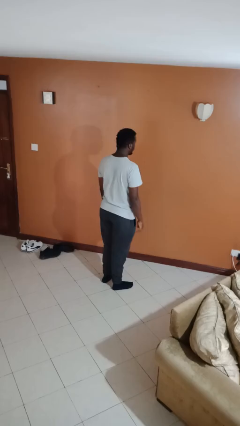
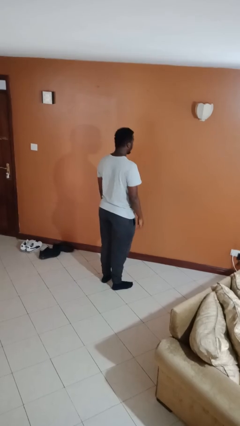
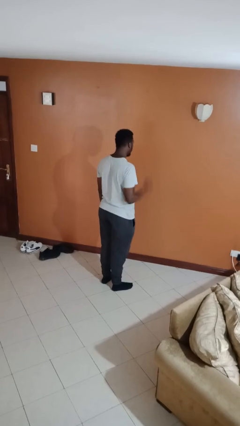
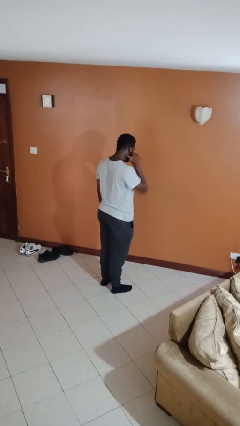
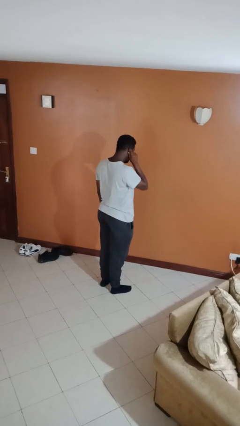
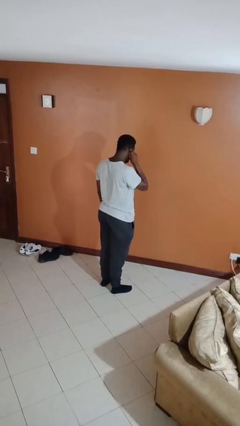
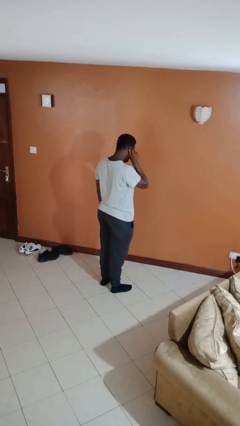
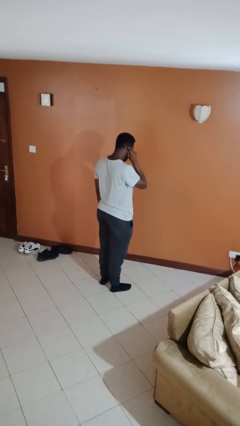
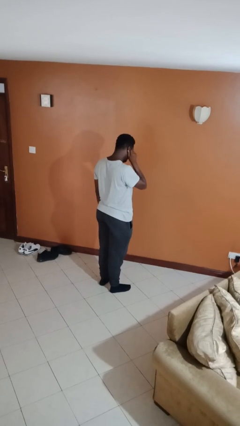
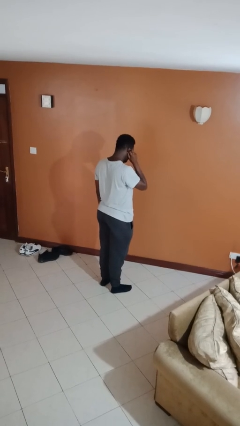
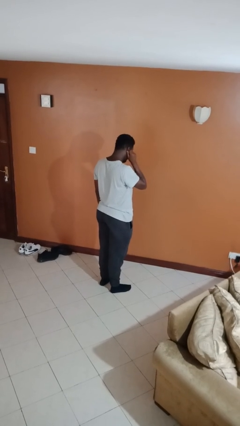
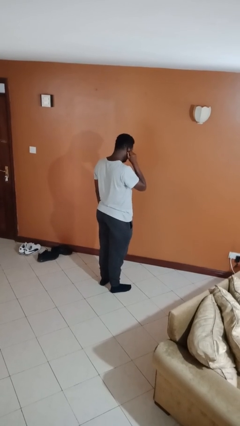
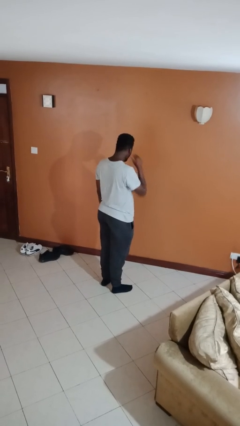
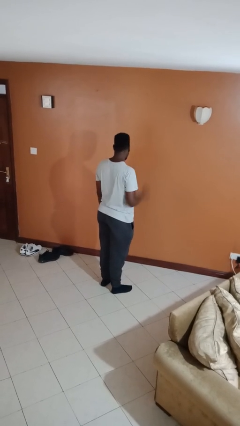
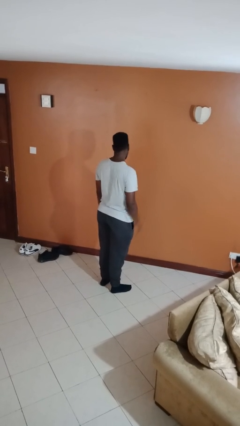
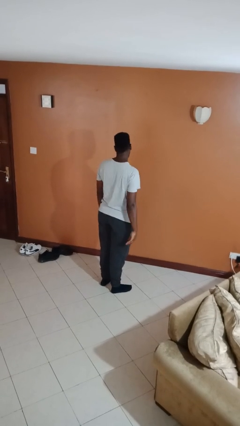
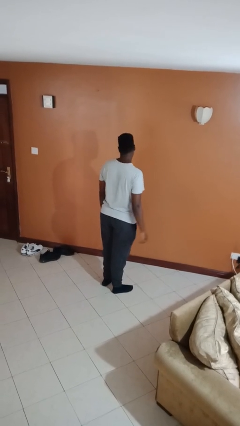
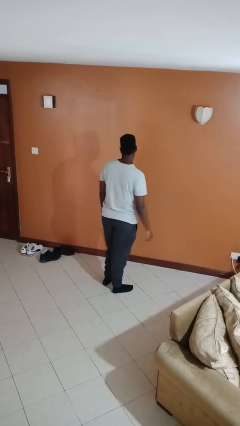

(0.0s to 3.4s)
person touches earlobe

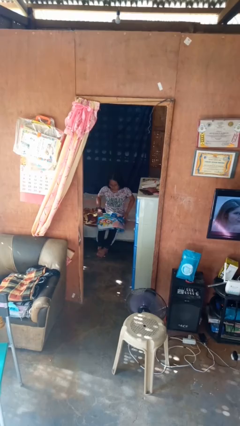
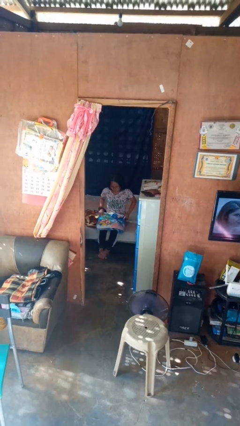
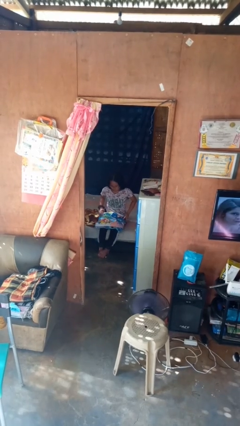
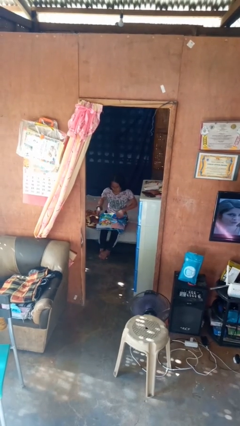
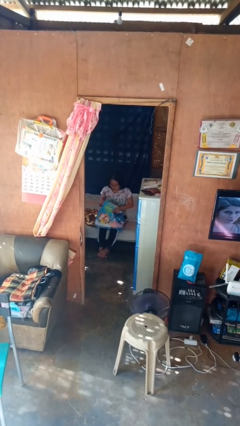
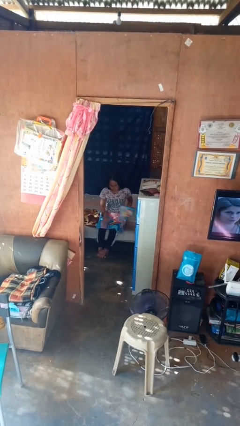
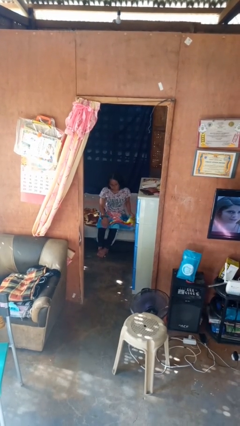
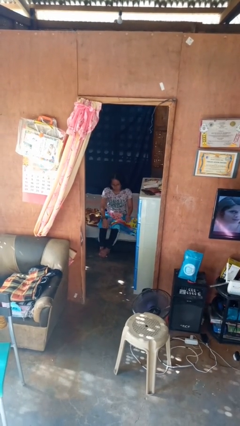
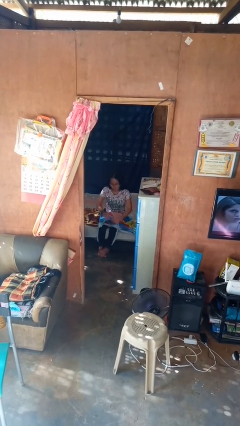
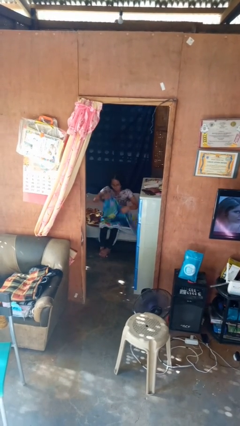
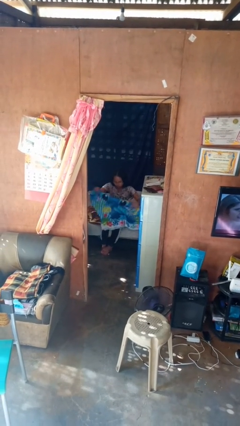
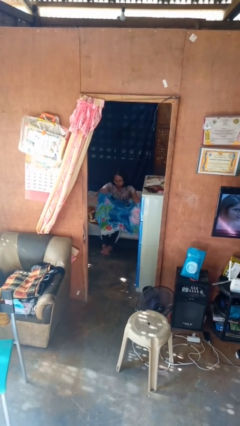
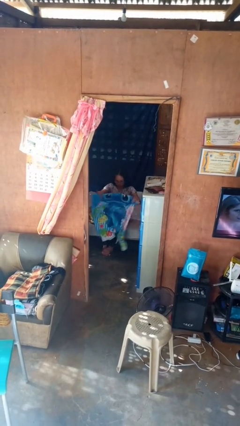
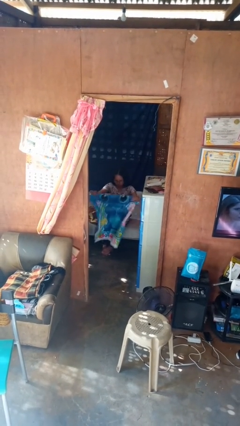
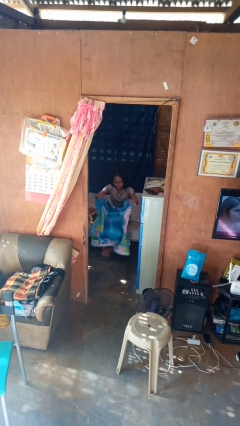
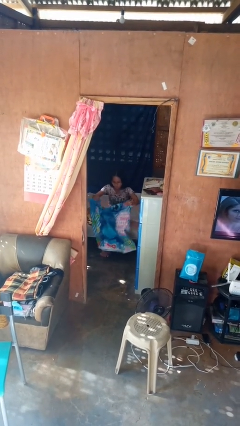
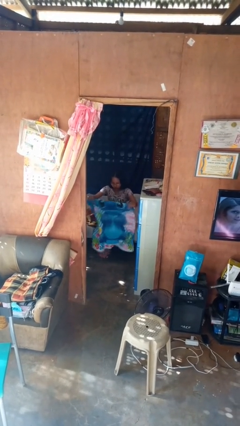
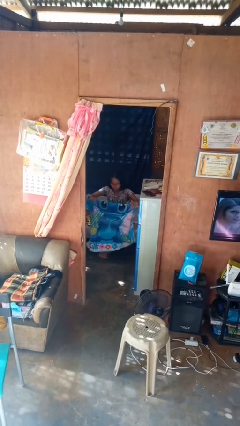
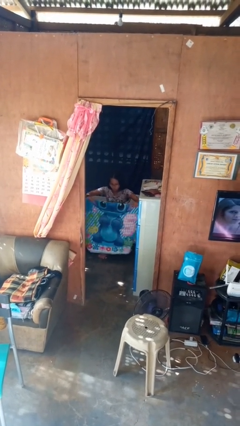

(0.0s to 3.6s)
person unfolds blanket

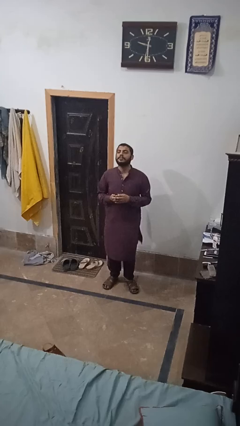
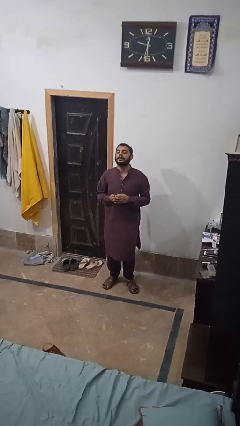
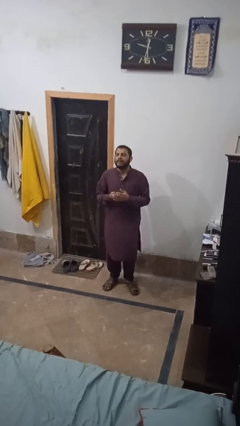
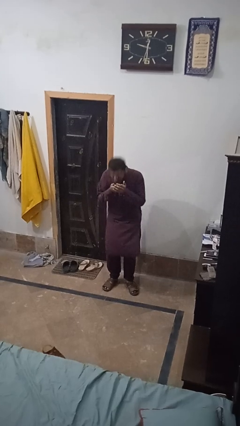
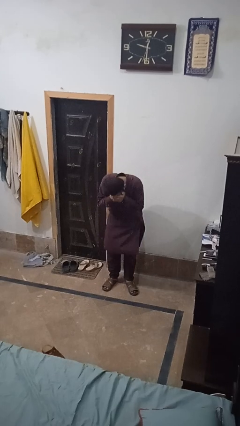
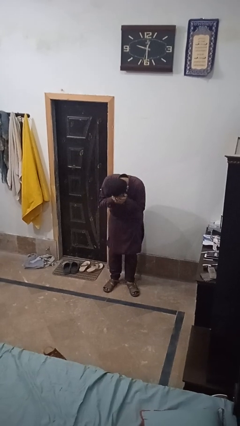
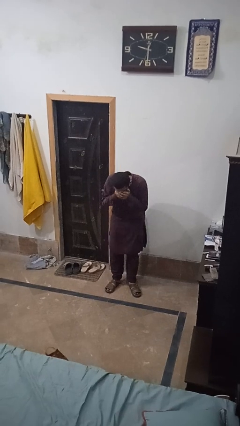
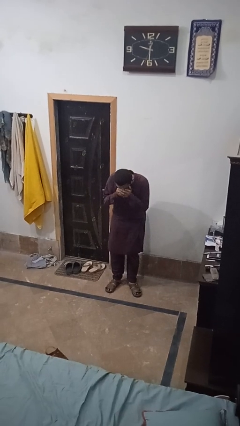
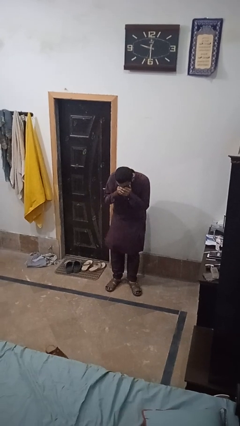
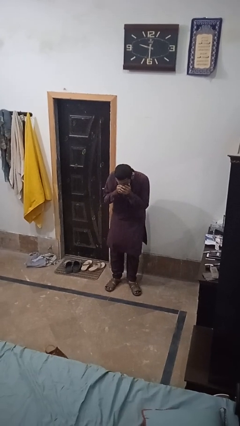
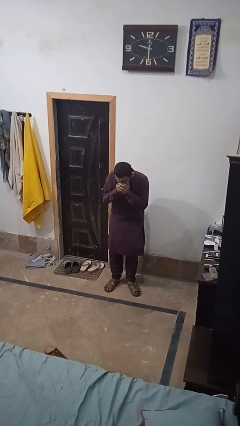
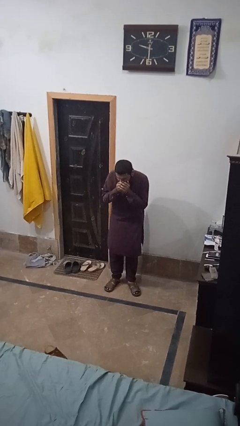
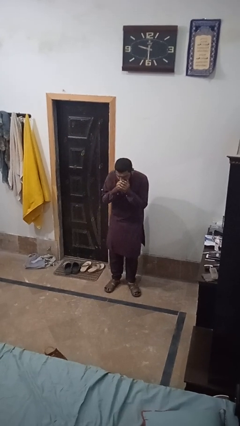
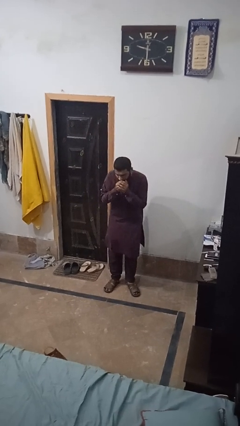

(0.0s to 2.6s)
person sneezes into hand

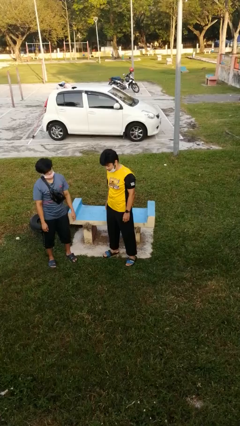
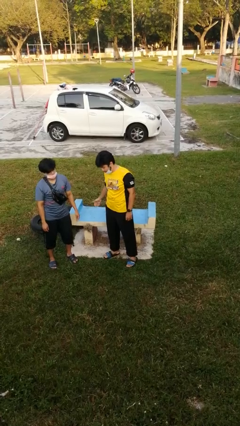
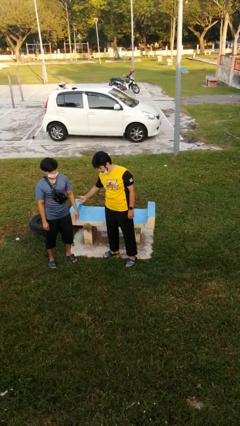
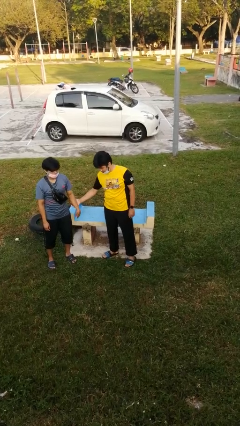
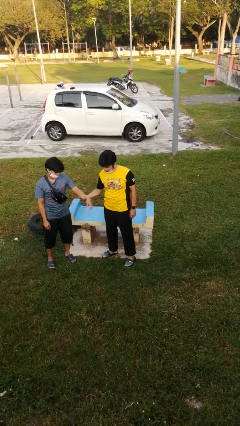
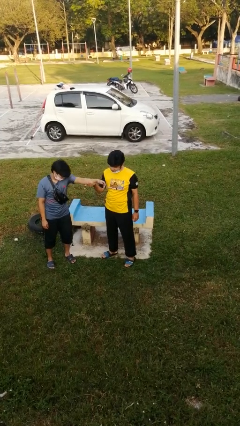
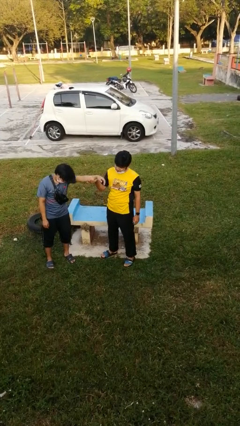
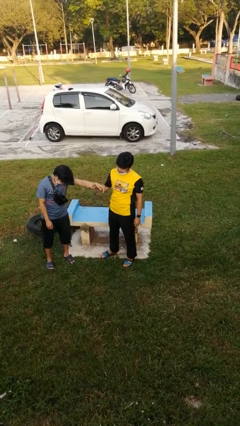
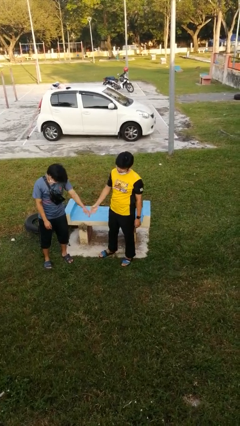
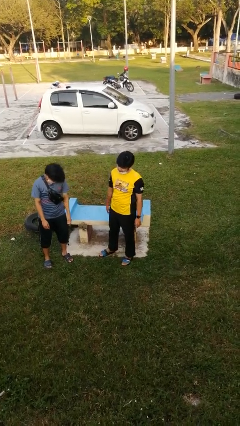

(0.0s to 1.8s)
person grabs person by forearm

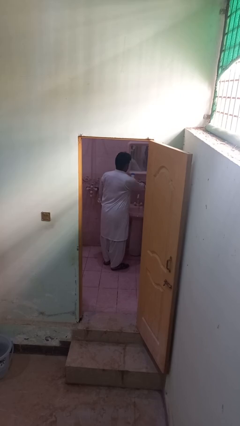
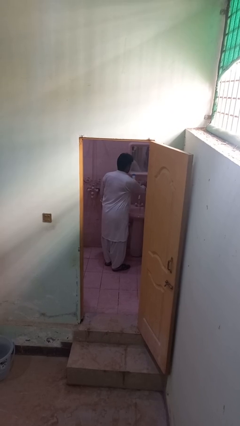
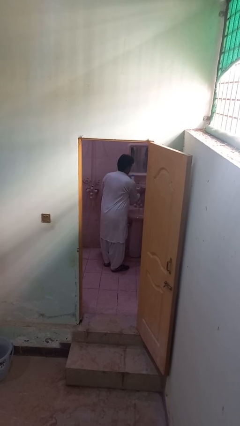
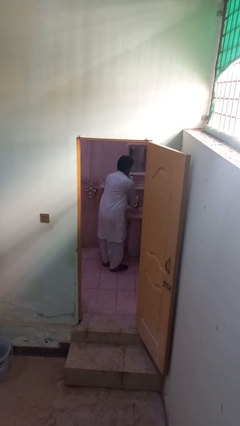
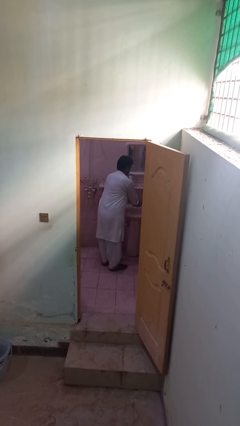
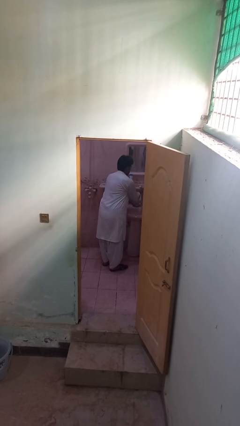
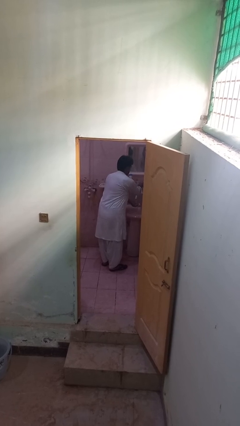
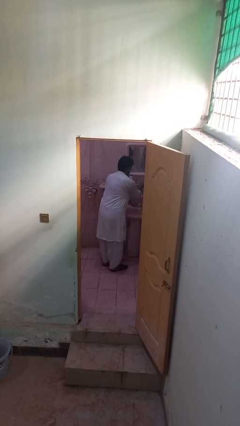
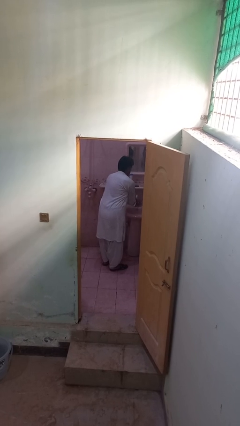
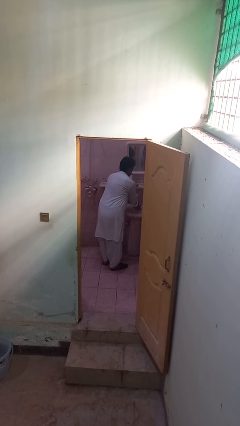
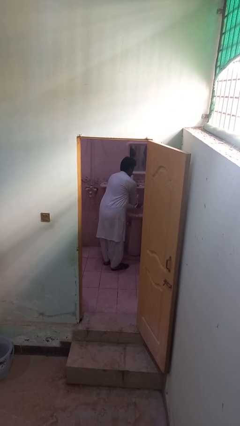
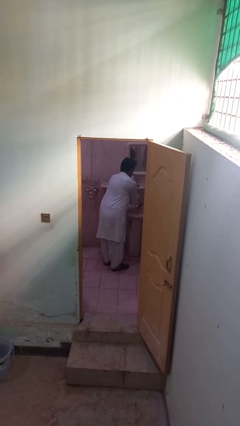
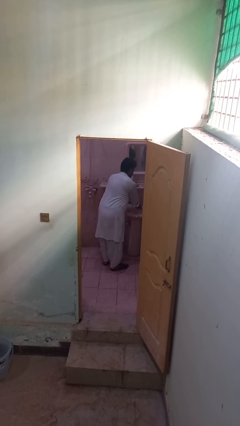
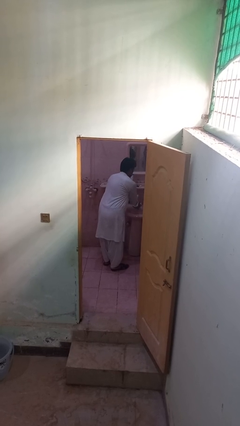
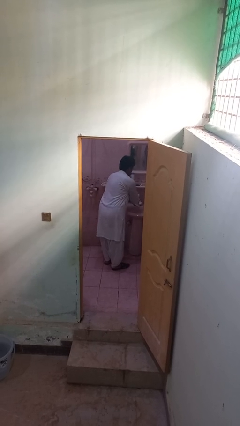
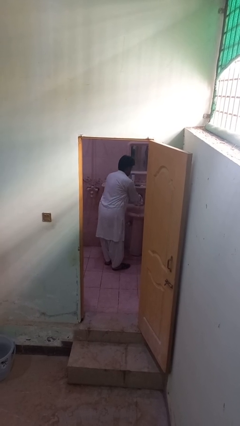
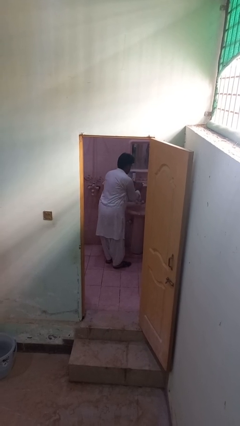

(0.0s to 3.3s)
person washes hands

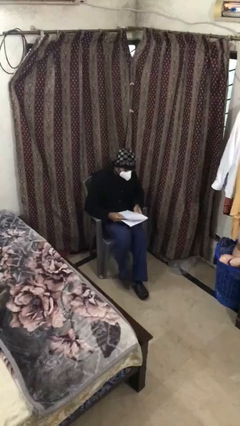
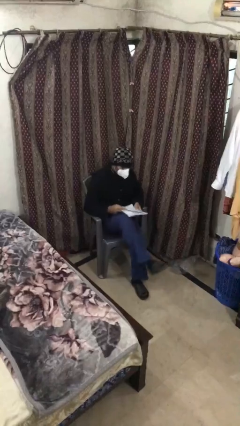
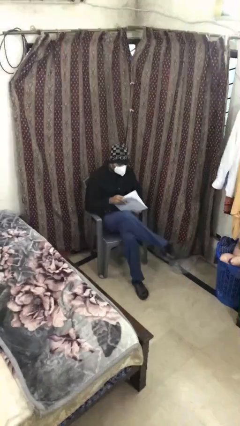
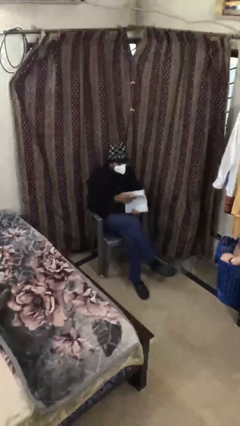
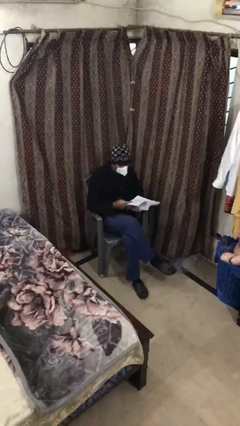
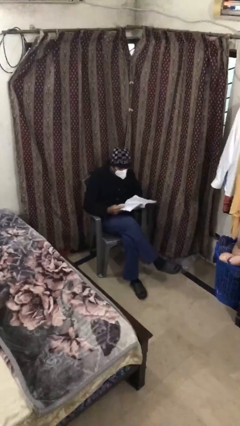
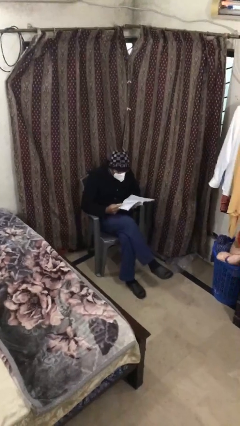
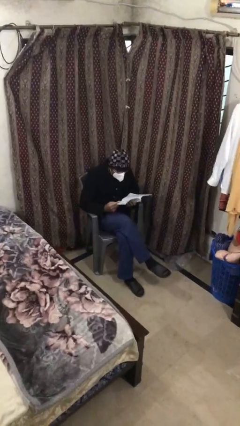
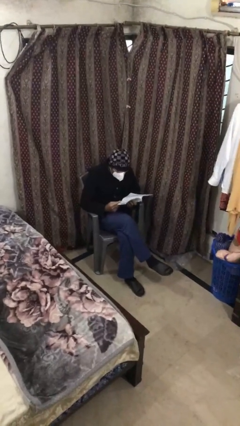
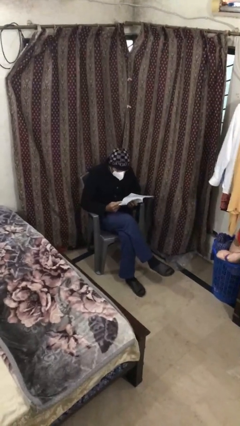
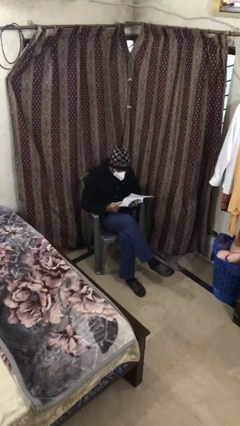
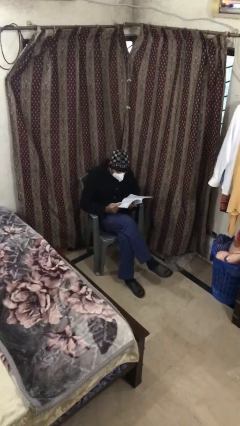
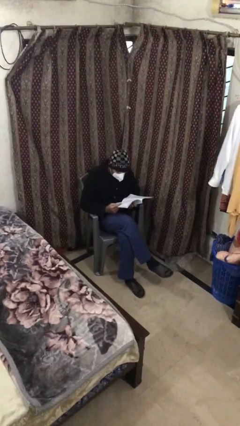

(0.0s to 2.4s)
person reads document

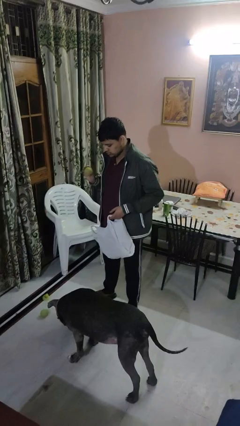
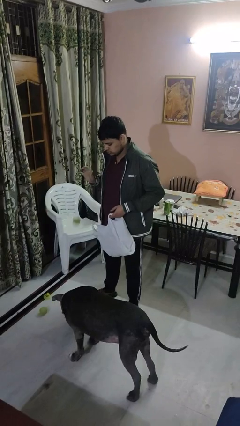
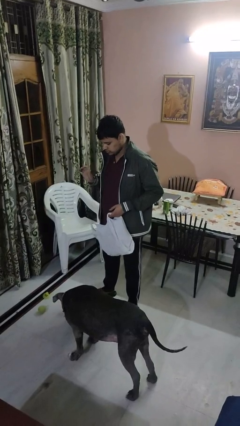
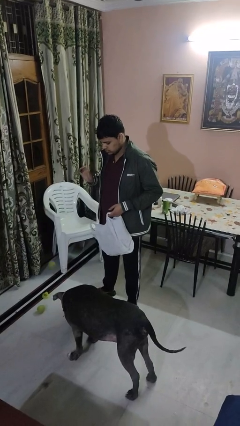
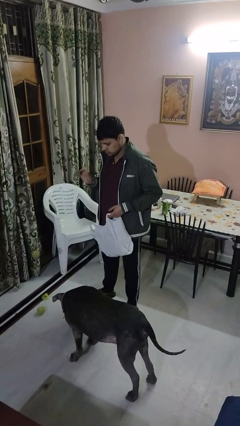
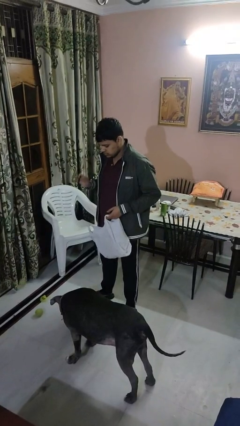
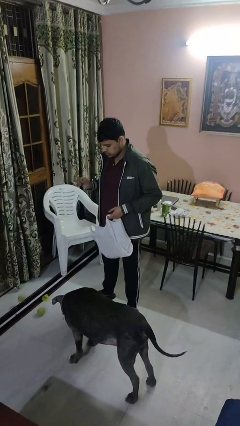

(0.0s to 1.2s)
person throws object to dog
